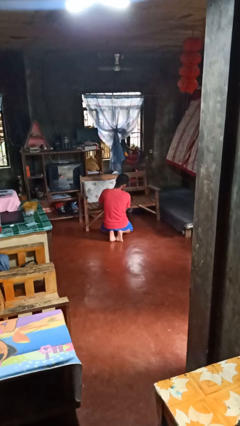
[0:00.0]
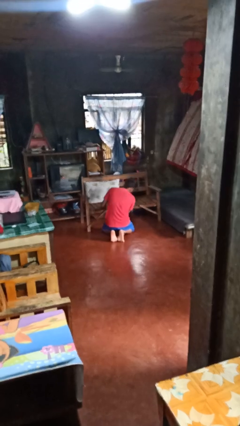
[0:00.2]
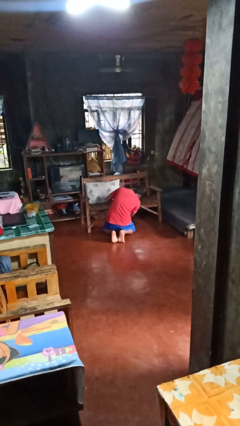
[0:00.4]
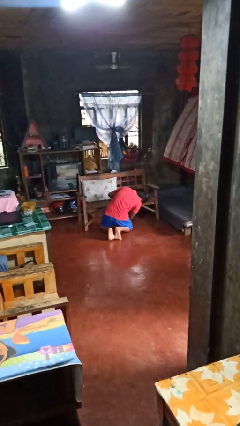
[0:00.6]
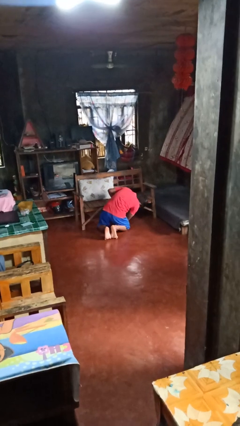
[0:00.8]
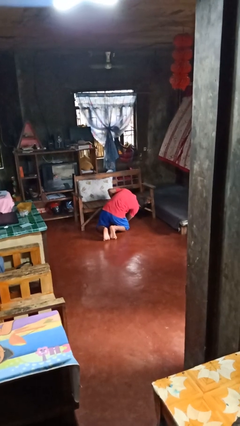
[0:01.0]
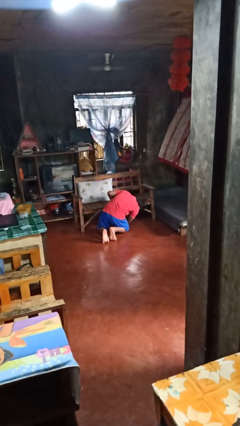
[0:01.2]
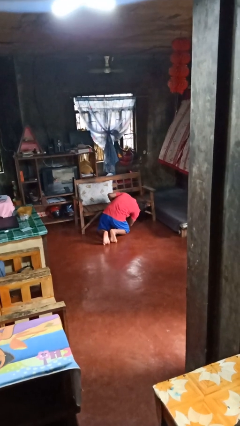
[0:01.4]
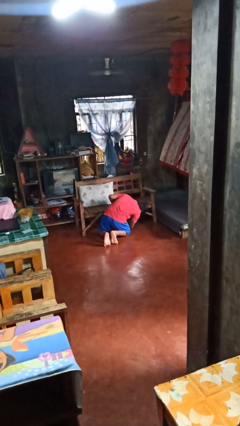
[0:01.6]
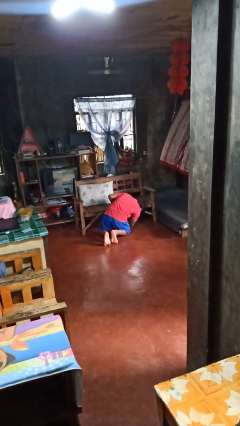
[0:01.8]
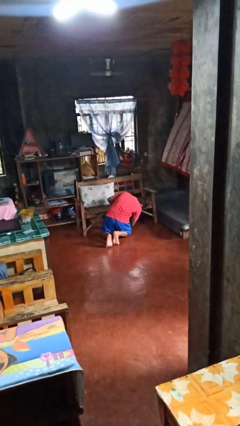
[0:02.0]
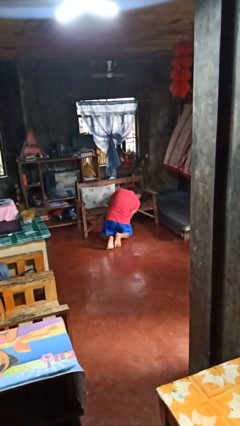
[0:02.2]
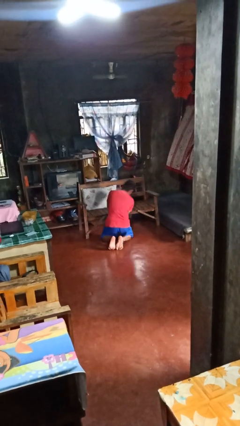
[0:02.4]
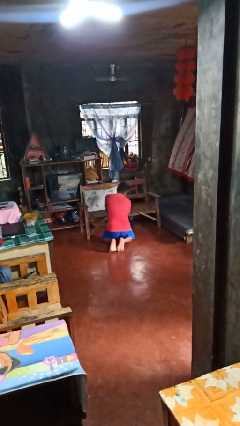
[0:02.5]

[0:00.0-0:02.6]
person searches under couch

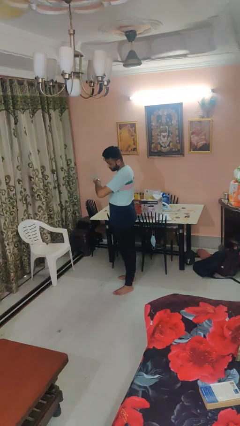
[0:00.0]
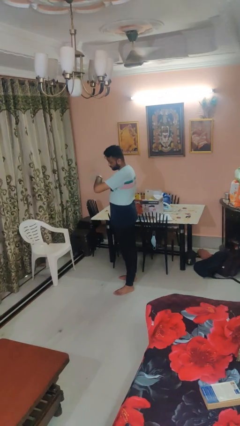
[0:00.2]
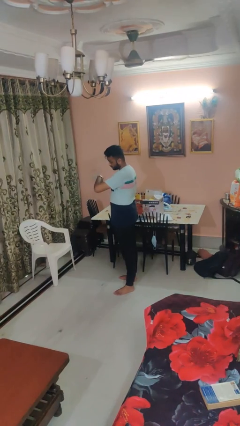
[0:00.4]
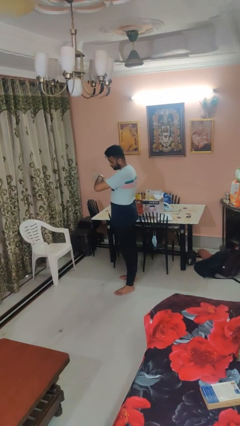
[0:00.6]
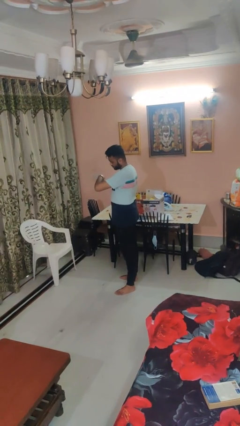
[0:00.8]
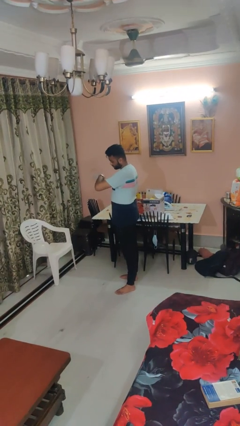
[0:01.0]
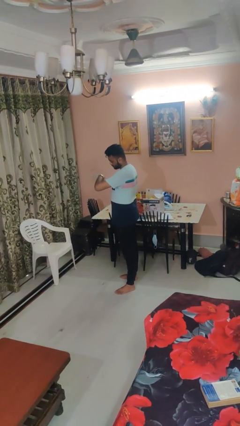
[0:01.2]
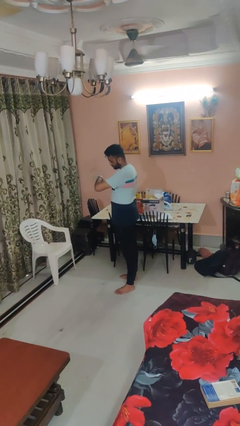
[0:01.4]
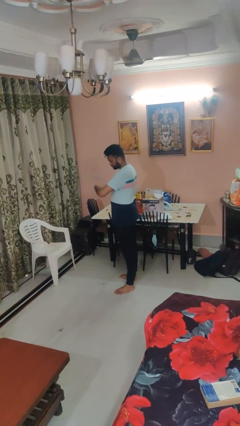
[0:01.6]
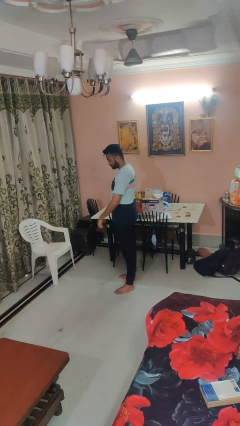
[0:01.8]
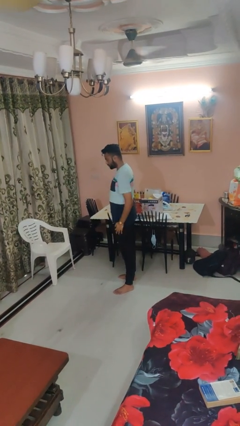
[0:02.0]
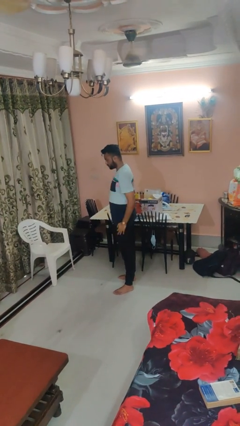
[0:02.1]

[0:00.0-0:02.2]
person looks at wristwatch

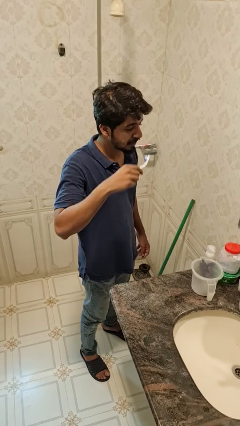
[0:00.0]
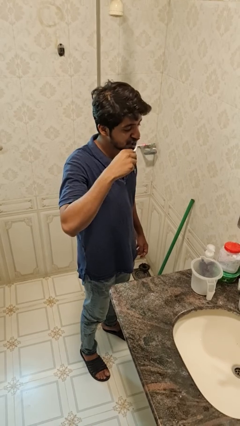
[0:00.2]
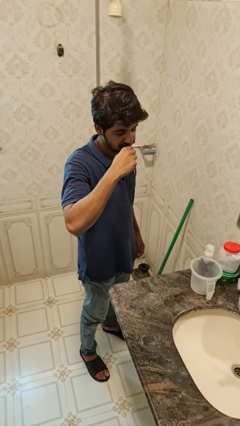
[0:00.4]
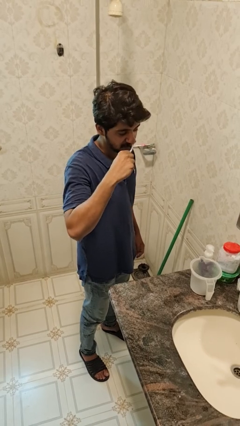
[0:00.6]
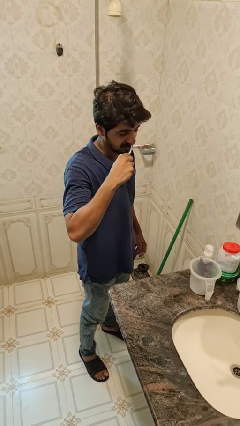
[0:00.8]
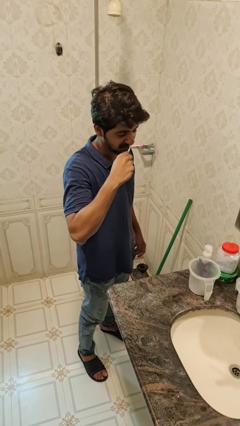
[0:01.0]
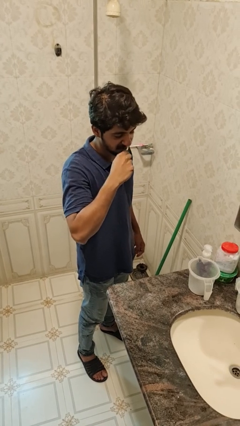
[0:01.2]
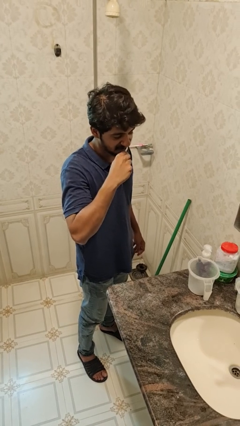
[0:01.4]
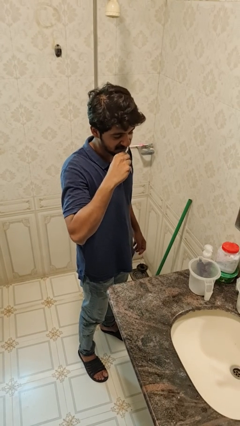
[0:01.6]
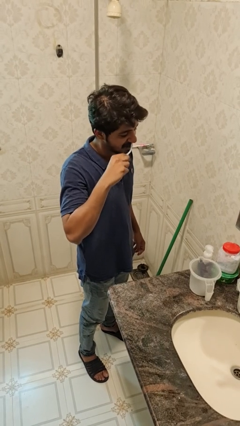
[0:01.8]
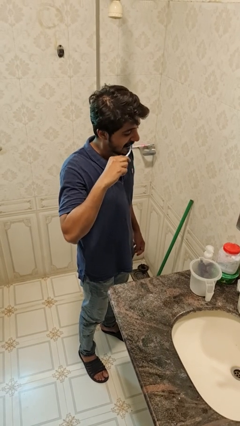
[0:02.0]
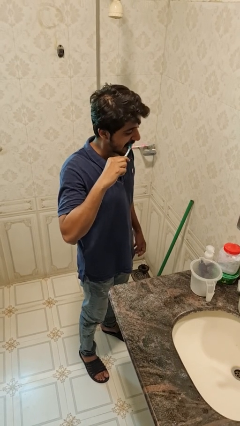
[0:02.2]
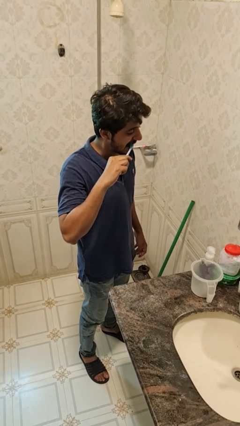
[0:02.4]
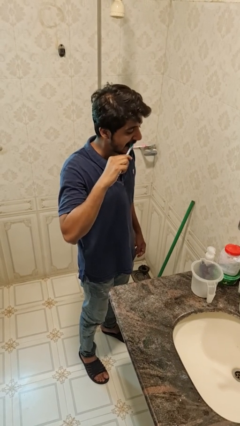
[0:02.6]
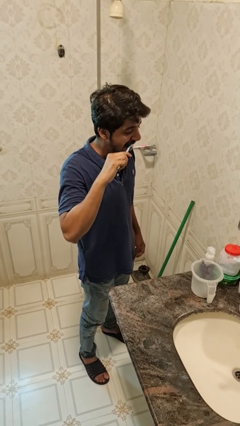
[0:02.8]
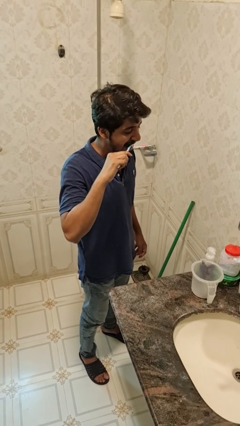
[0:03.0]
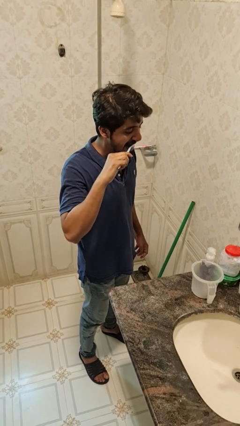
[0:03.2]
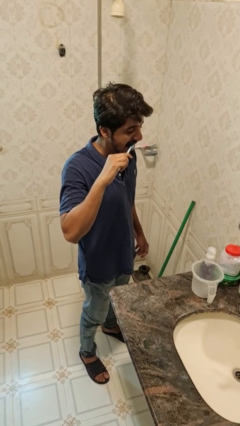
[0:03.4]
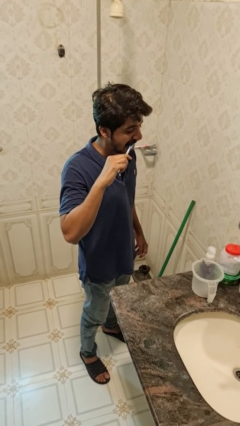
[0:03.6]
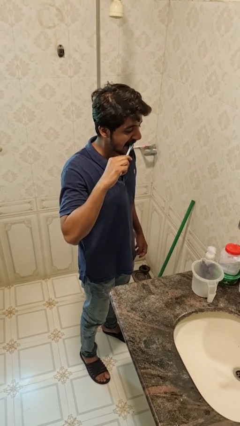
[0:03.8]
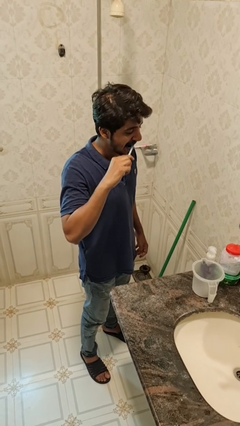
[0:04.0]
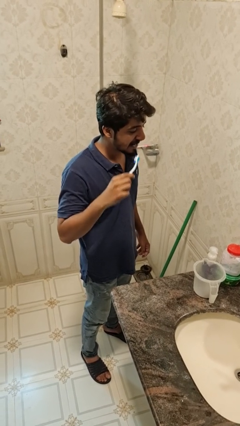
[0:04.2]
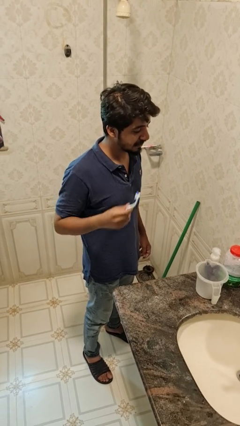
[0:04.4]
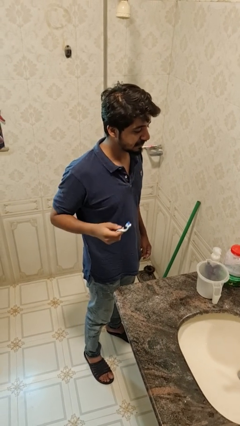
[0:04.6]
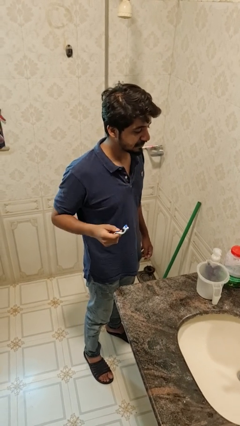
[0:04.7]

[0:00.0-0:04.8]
person brushes teeth

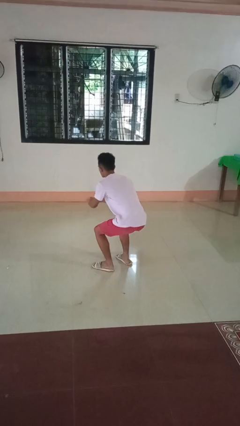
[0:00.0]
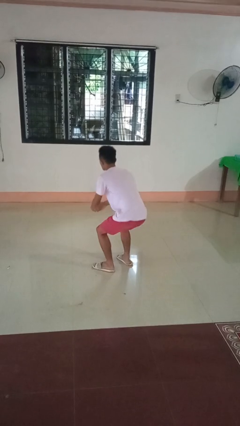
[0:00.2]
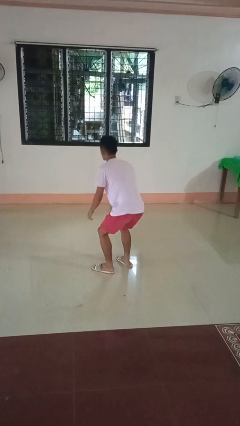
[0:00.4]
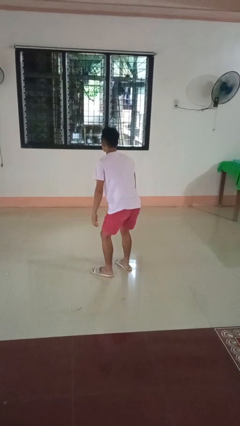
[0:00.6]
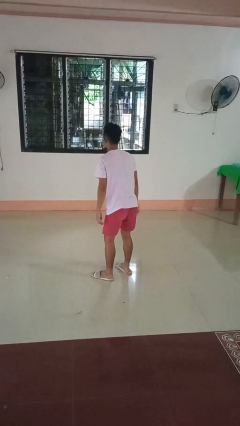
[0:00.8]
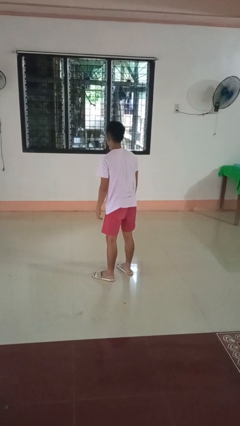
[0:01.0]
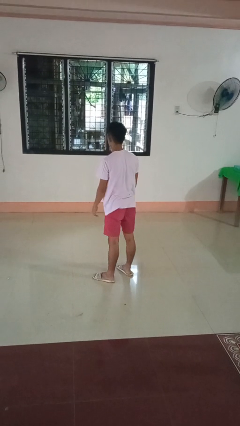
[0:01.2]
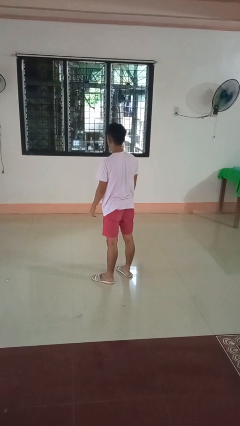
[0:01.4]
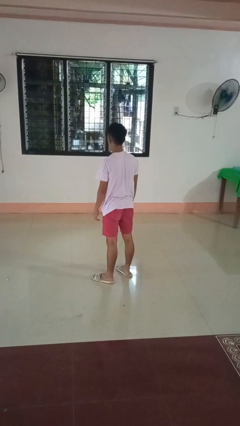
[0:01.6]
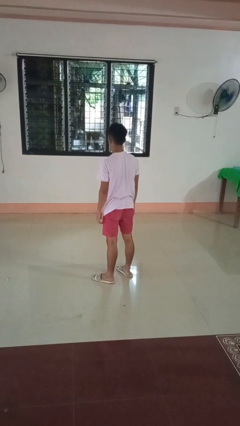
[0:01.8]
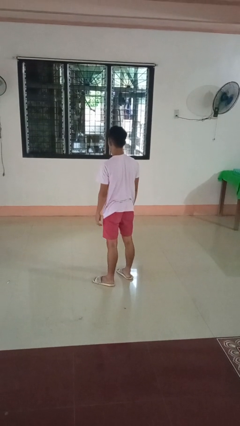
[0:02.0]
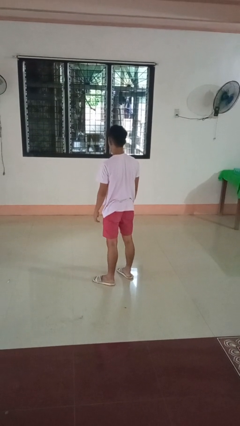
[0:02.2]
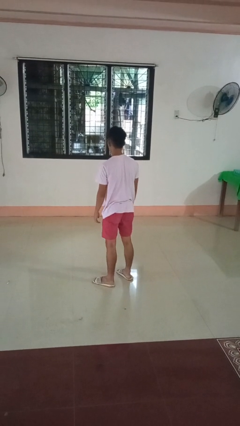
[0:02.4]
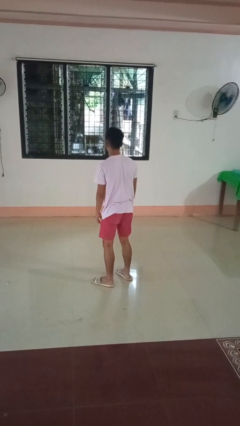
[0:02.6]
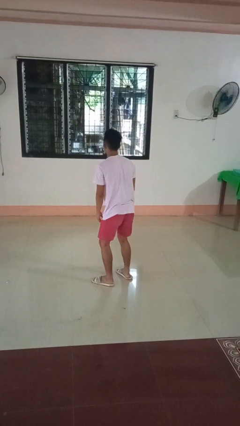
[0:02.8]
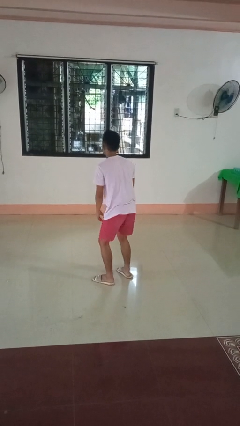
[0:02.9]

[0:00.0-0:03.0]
person stands up

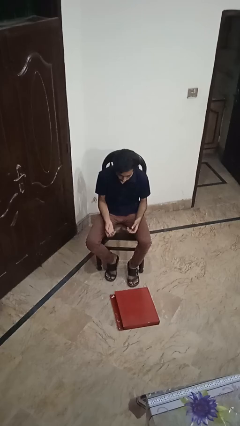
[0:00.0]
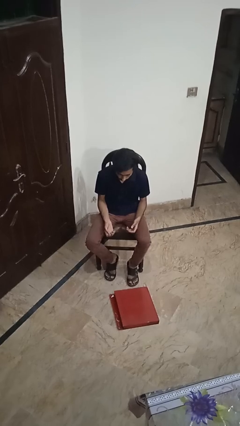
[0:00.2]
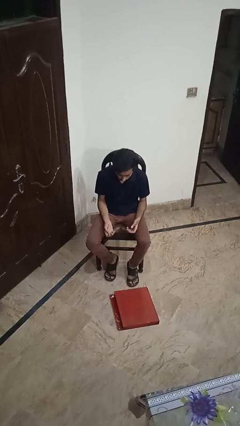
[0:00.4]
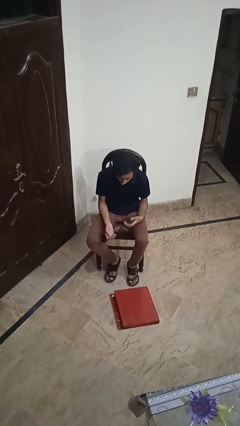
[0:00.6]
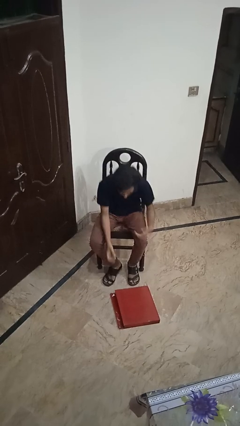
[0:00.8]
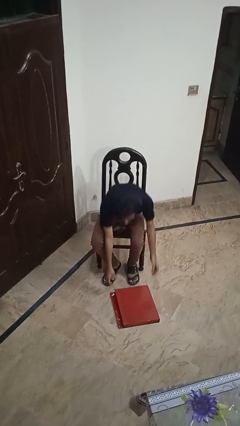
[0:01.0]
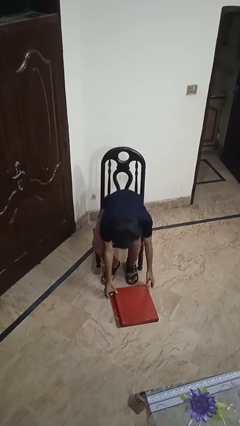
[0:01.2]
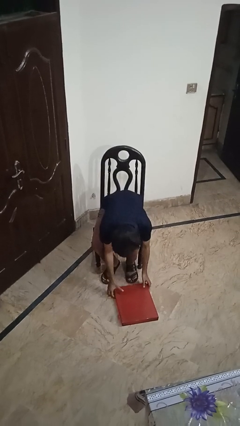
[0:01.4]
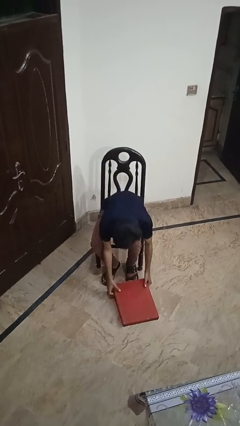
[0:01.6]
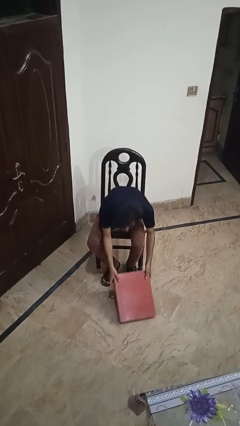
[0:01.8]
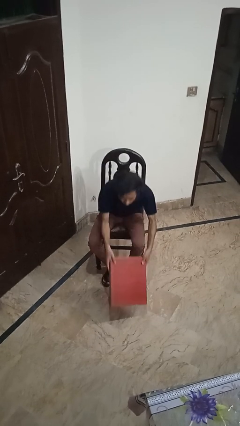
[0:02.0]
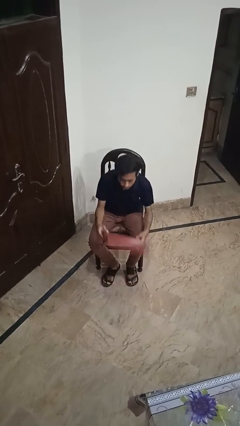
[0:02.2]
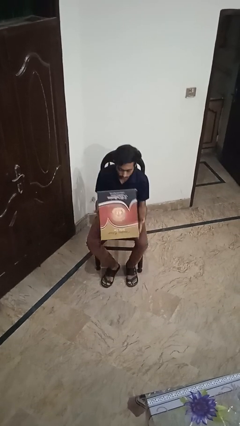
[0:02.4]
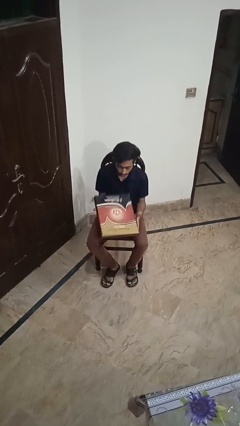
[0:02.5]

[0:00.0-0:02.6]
person picks up object from floor

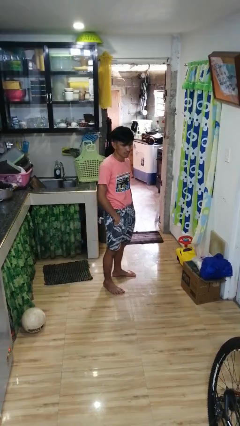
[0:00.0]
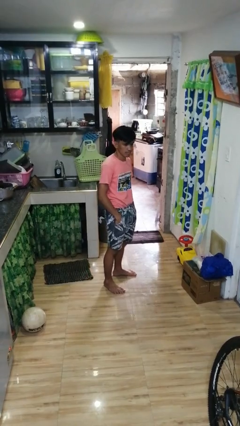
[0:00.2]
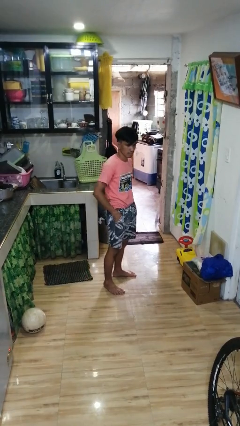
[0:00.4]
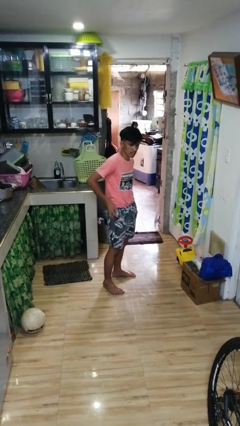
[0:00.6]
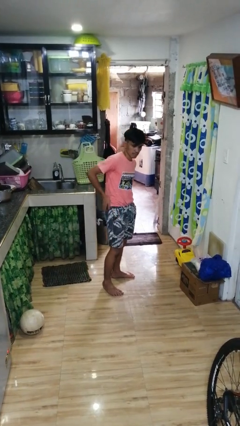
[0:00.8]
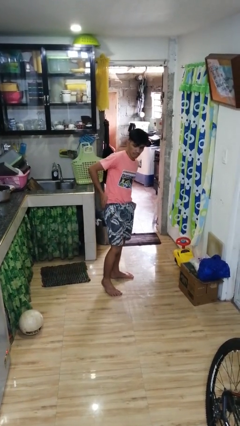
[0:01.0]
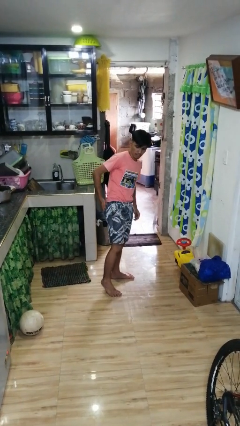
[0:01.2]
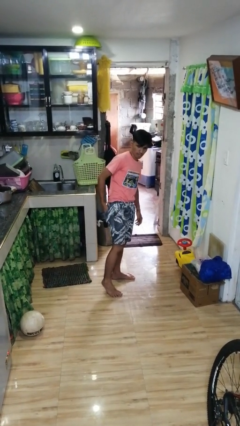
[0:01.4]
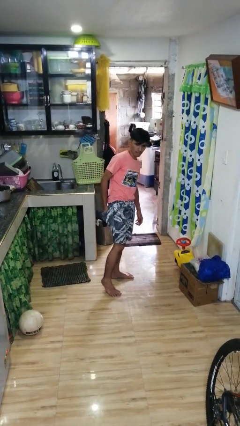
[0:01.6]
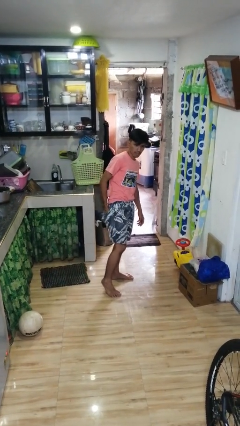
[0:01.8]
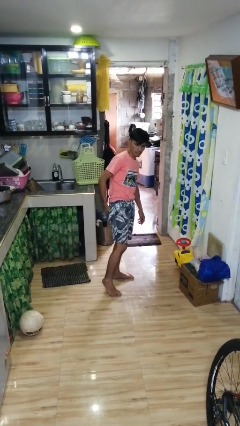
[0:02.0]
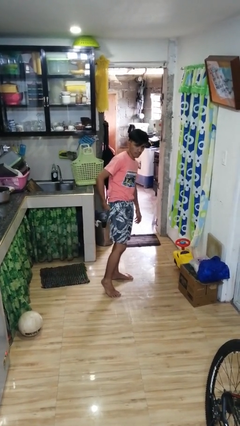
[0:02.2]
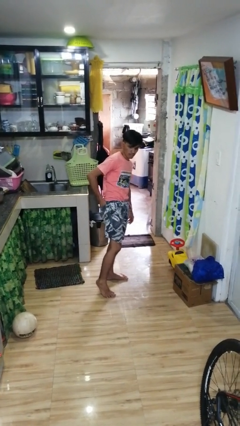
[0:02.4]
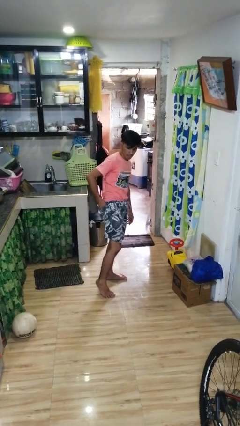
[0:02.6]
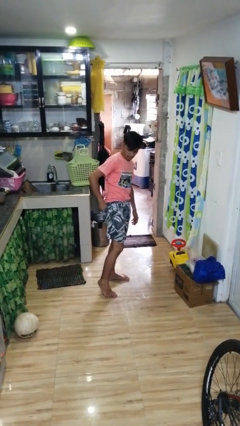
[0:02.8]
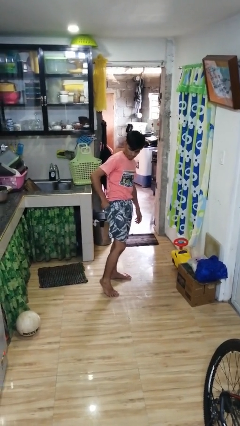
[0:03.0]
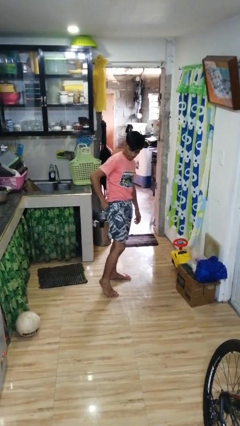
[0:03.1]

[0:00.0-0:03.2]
person puts hands in back pockets
